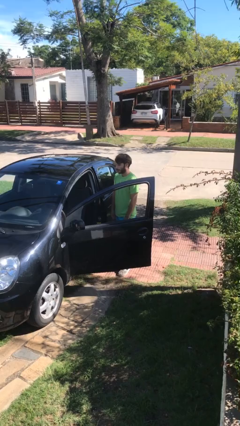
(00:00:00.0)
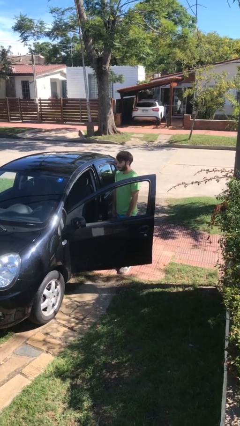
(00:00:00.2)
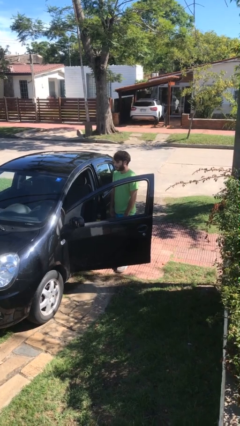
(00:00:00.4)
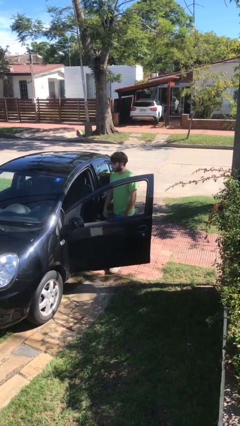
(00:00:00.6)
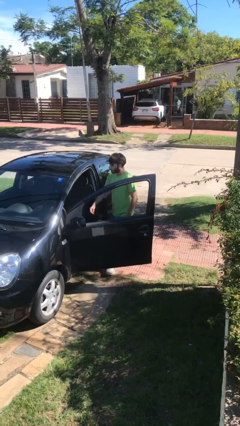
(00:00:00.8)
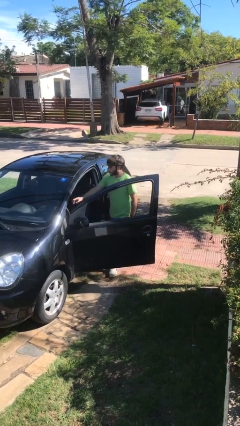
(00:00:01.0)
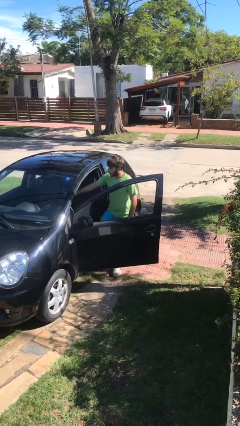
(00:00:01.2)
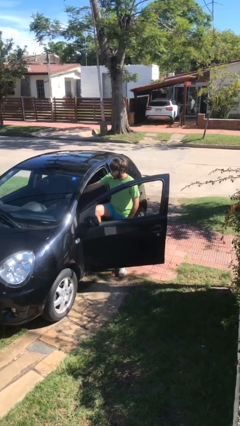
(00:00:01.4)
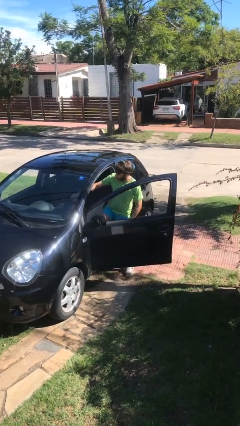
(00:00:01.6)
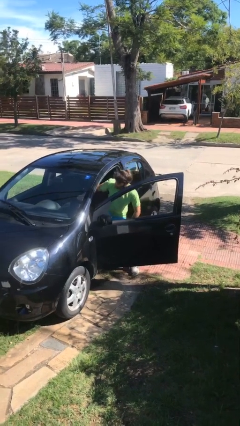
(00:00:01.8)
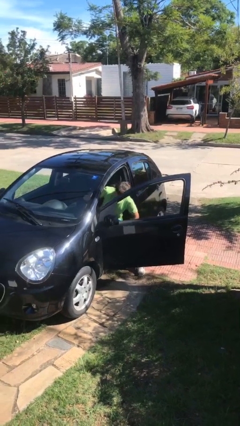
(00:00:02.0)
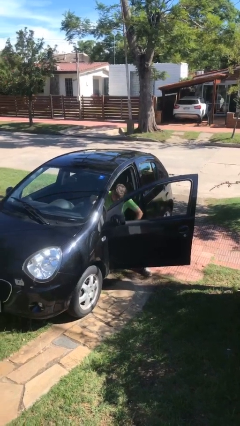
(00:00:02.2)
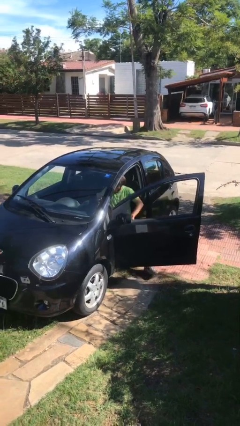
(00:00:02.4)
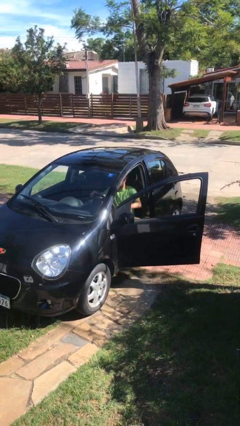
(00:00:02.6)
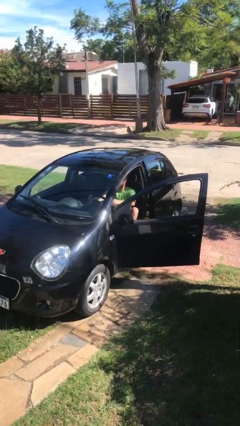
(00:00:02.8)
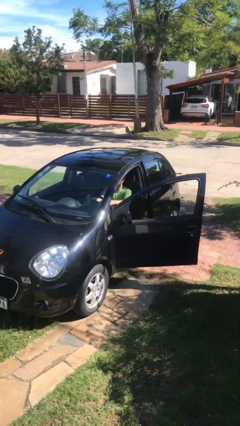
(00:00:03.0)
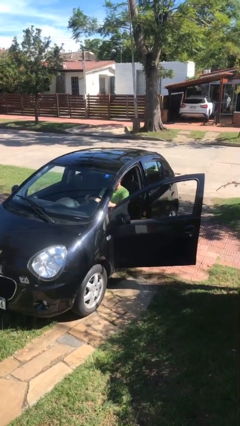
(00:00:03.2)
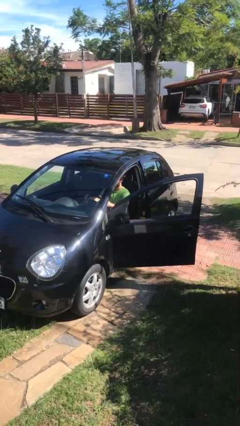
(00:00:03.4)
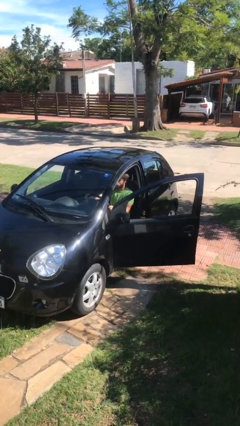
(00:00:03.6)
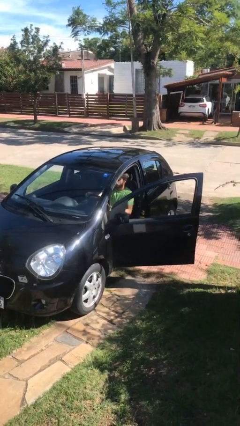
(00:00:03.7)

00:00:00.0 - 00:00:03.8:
person enters car

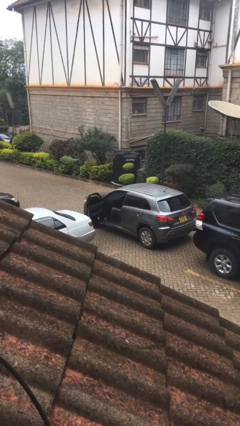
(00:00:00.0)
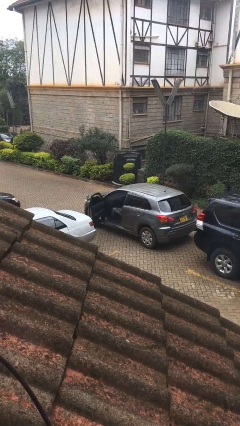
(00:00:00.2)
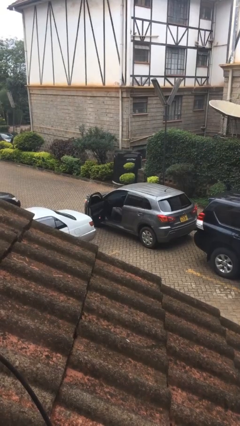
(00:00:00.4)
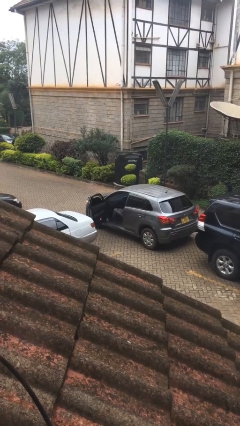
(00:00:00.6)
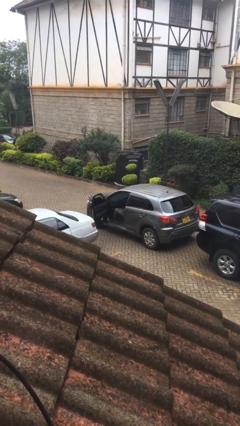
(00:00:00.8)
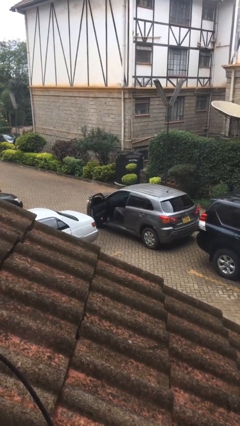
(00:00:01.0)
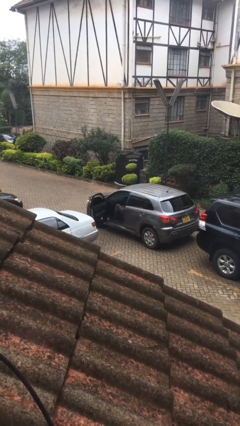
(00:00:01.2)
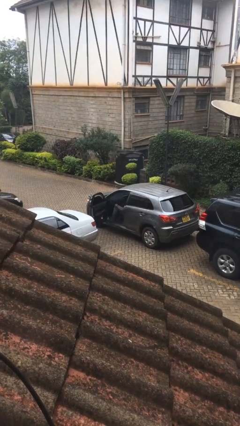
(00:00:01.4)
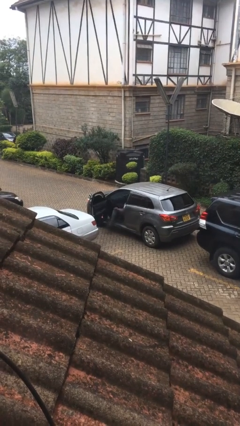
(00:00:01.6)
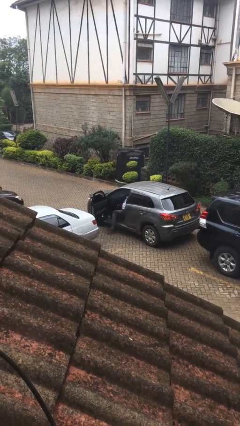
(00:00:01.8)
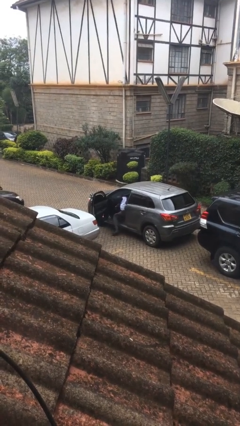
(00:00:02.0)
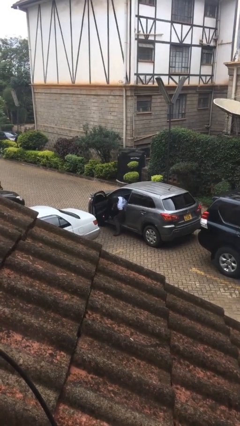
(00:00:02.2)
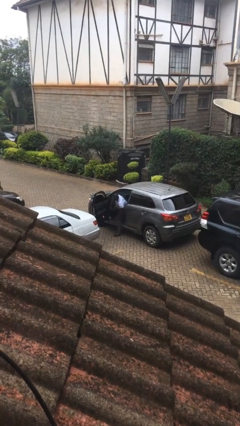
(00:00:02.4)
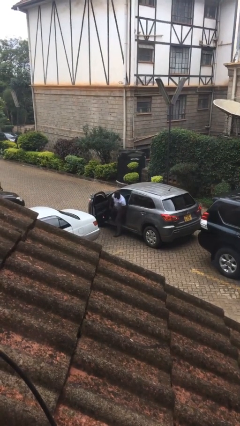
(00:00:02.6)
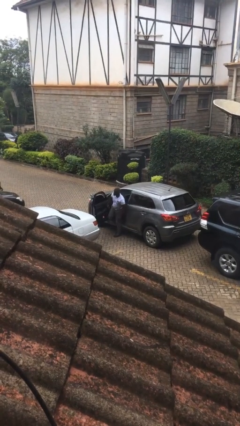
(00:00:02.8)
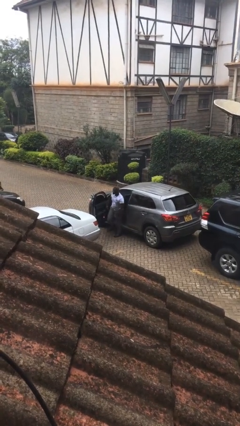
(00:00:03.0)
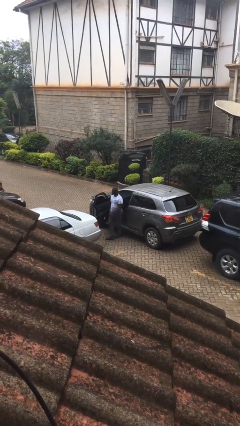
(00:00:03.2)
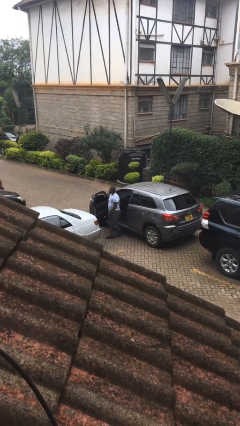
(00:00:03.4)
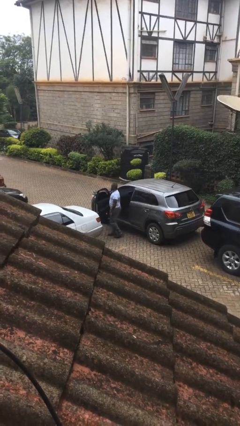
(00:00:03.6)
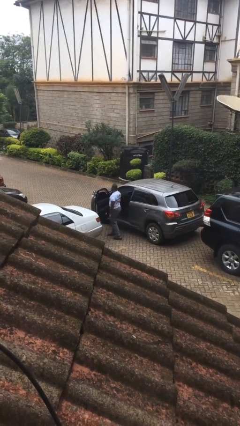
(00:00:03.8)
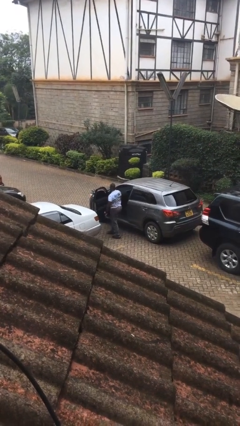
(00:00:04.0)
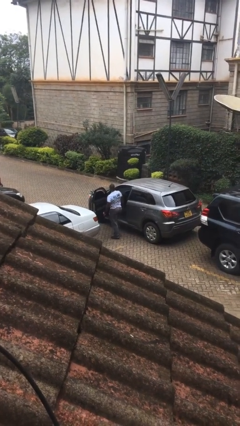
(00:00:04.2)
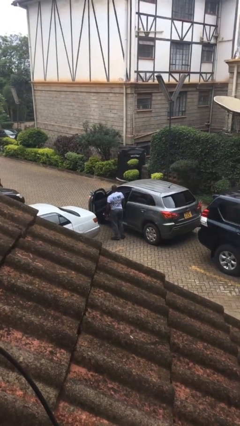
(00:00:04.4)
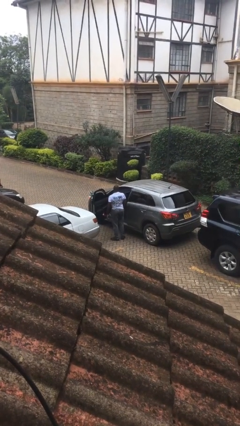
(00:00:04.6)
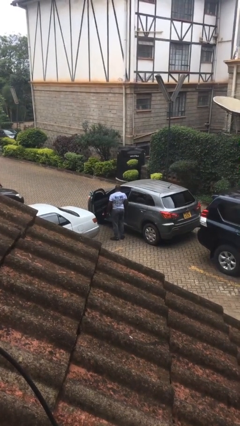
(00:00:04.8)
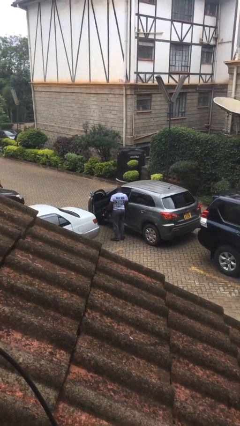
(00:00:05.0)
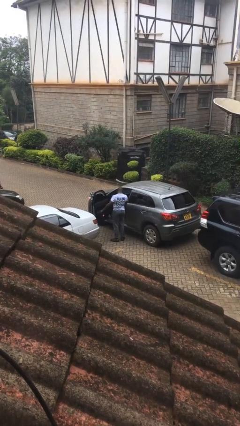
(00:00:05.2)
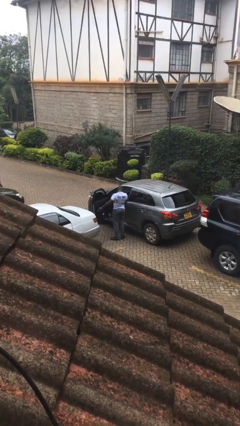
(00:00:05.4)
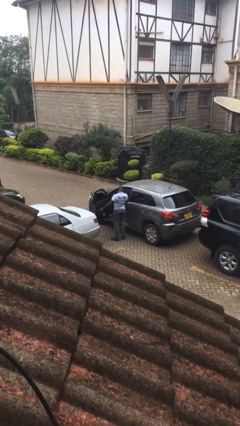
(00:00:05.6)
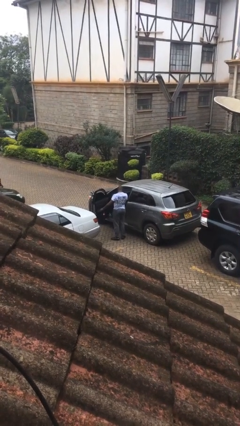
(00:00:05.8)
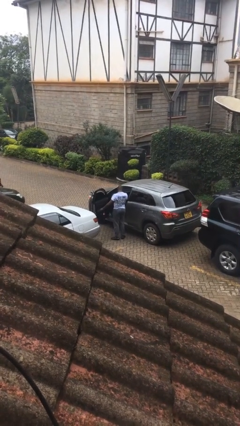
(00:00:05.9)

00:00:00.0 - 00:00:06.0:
person exits car

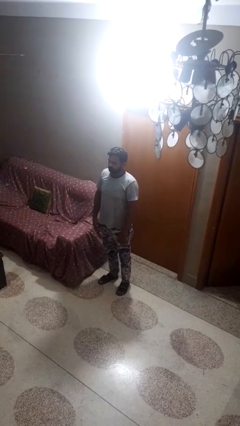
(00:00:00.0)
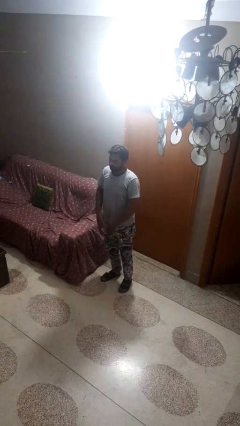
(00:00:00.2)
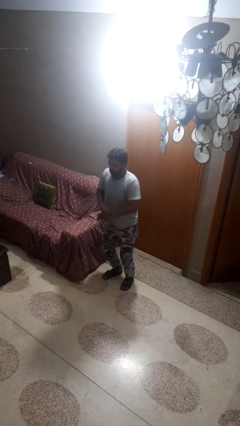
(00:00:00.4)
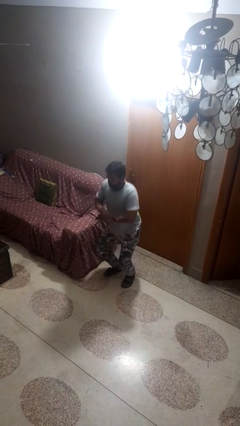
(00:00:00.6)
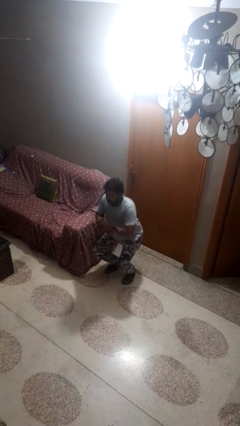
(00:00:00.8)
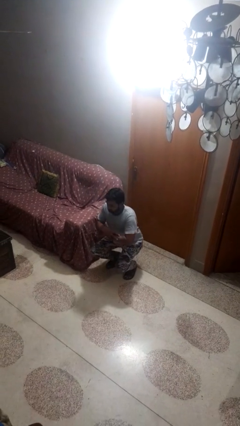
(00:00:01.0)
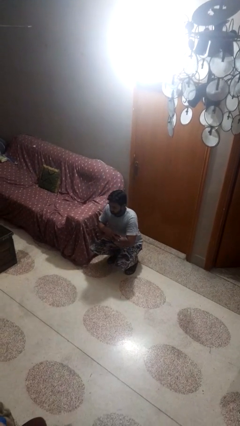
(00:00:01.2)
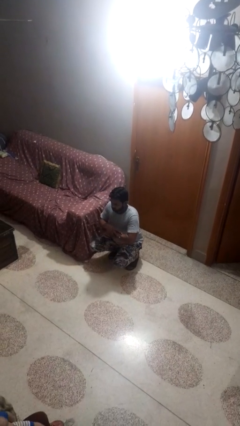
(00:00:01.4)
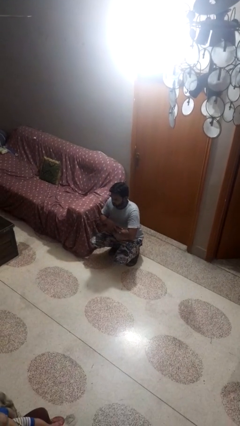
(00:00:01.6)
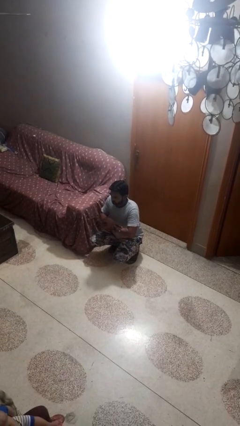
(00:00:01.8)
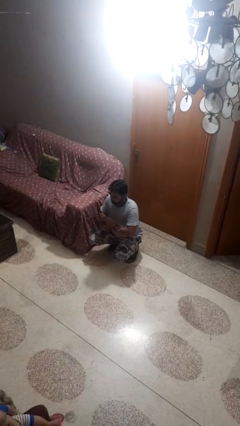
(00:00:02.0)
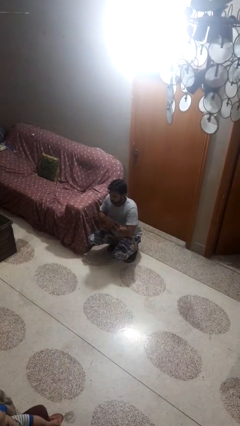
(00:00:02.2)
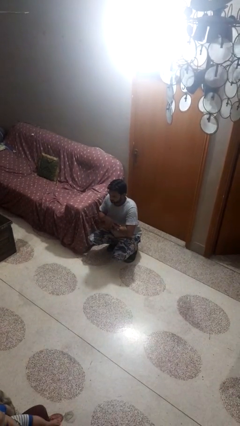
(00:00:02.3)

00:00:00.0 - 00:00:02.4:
person squats

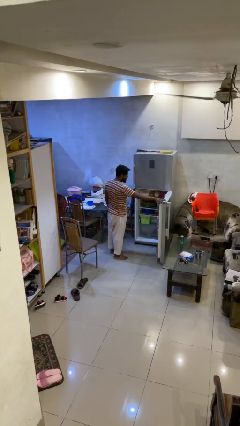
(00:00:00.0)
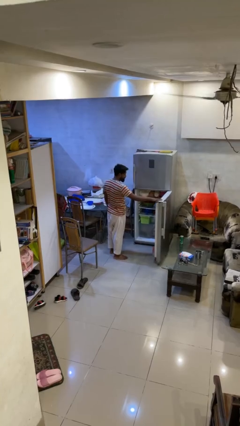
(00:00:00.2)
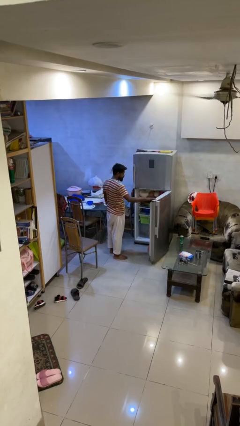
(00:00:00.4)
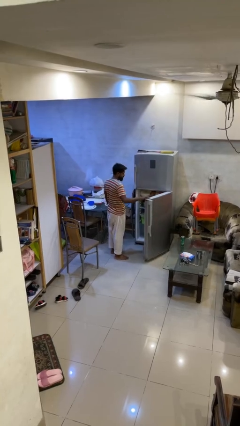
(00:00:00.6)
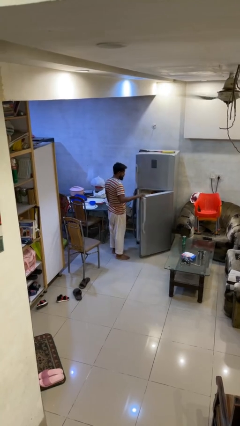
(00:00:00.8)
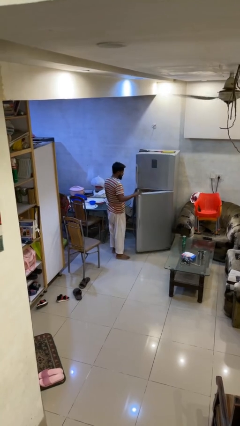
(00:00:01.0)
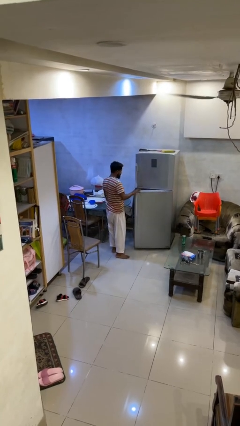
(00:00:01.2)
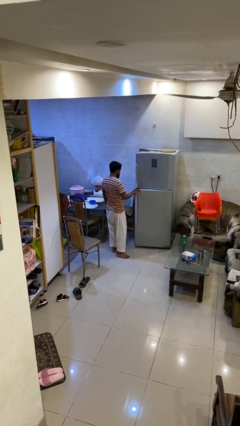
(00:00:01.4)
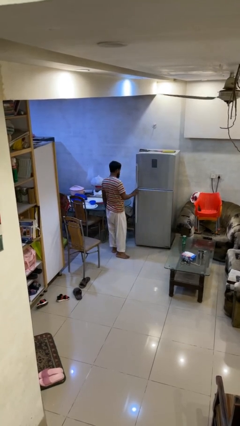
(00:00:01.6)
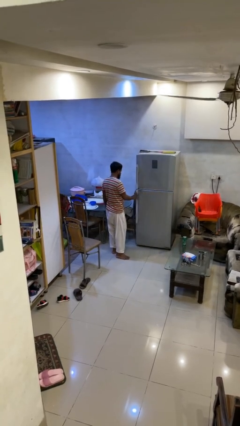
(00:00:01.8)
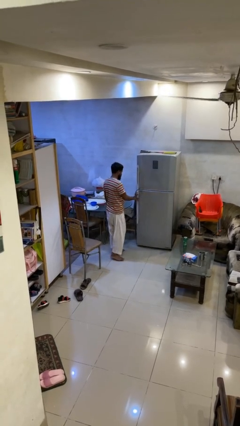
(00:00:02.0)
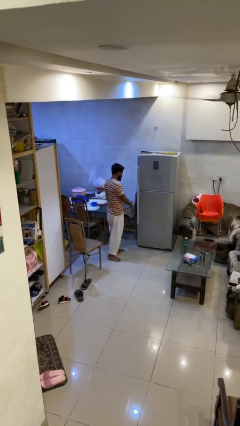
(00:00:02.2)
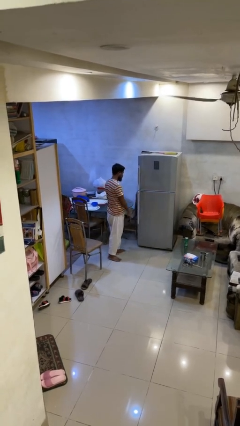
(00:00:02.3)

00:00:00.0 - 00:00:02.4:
person closes refrigerator

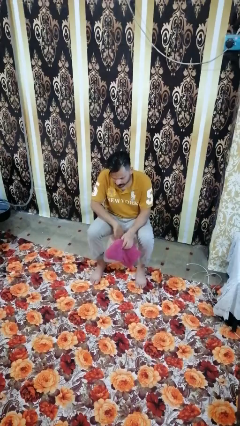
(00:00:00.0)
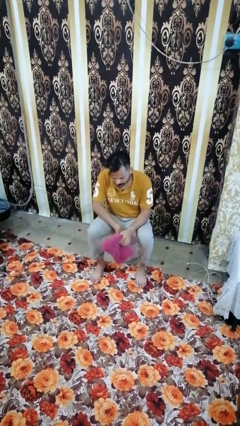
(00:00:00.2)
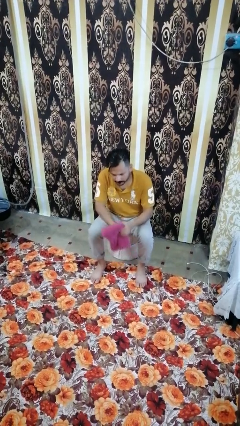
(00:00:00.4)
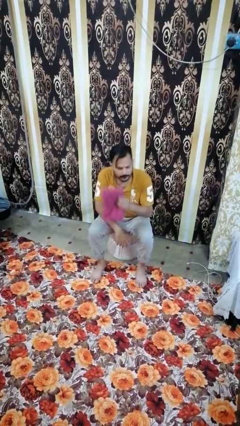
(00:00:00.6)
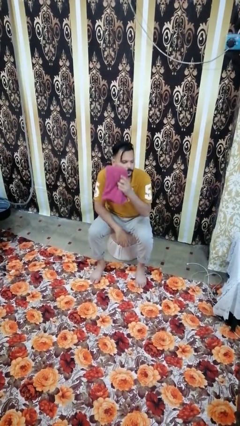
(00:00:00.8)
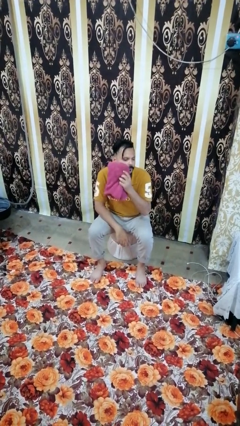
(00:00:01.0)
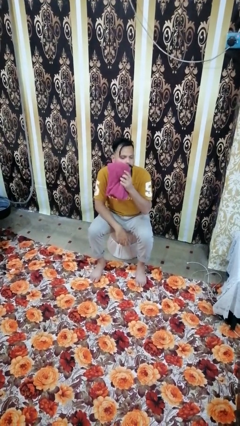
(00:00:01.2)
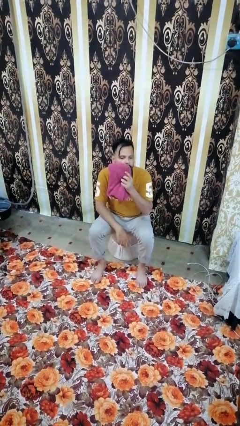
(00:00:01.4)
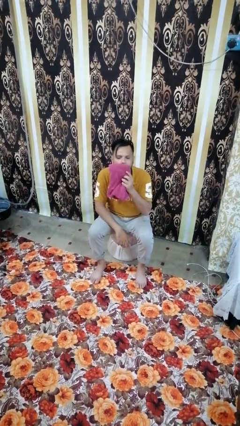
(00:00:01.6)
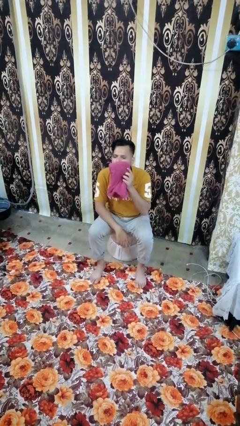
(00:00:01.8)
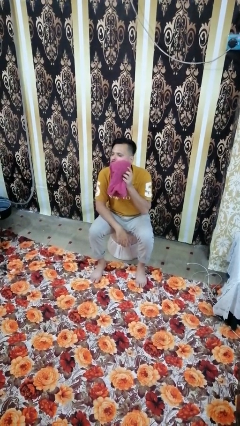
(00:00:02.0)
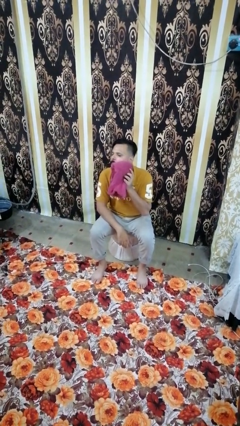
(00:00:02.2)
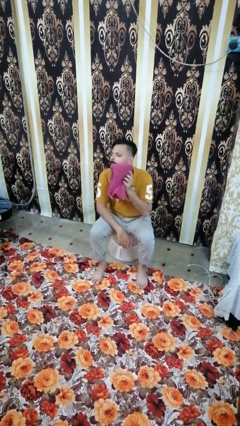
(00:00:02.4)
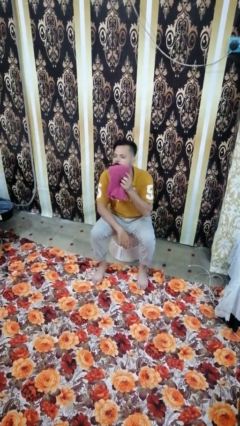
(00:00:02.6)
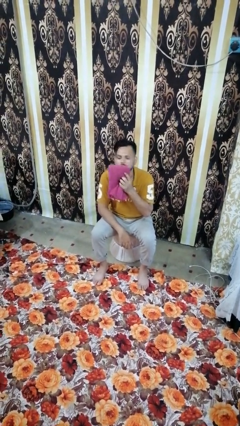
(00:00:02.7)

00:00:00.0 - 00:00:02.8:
person wipes mouth with napkin
